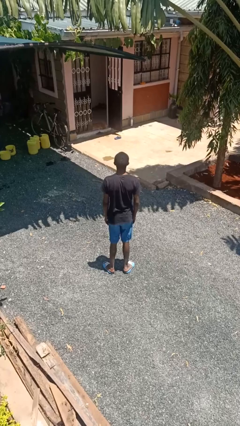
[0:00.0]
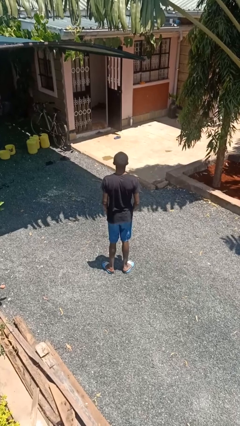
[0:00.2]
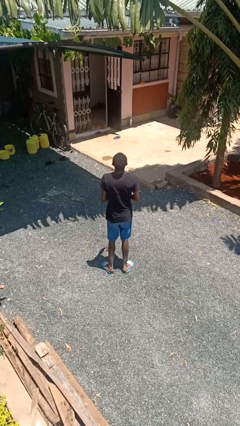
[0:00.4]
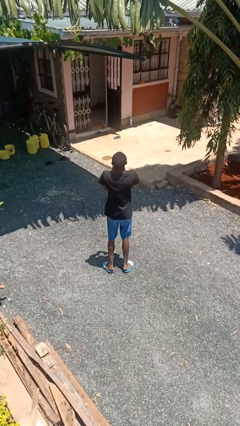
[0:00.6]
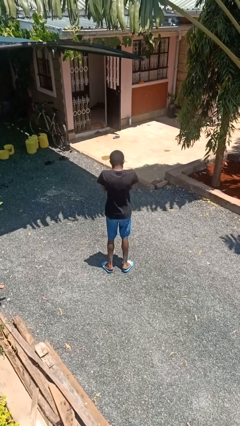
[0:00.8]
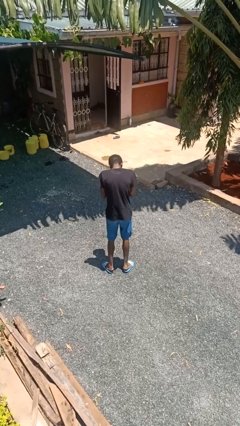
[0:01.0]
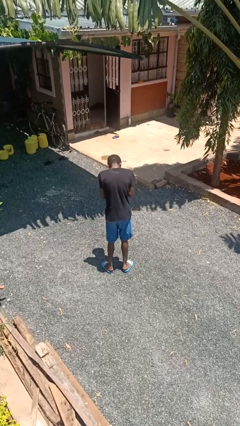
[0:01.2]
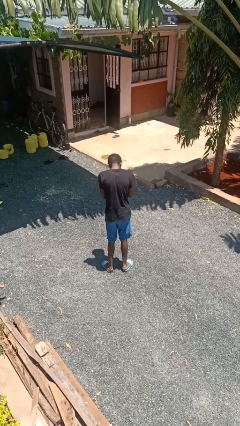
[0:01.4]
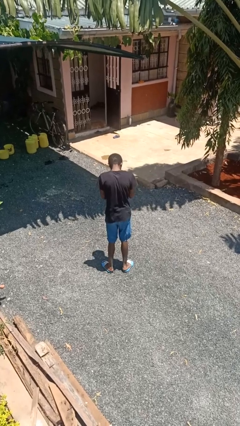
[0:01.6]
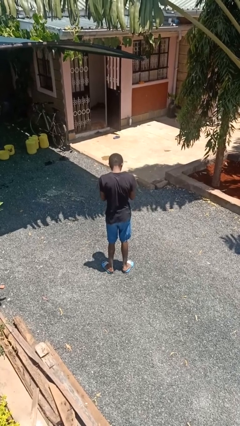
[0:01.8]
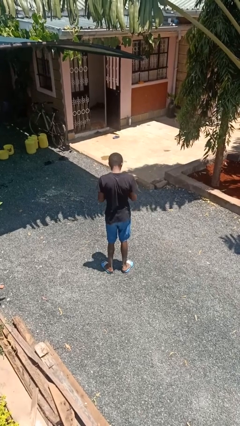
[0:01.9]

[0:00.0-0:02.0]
person sneezes into hand

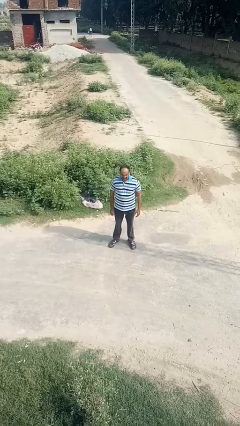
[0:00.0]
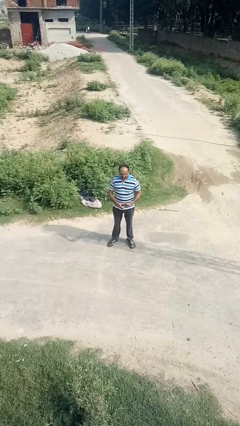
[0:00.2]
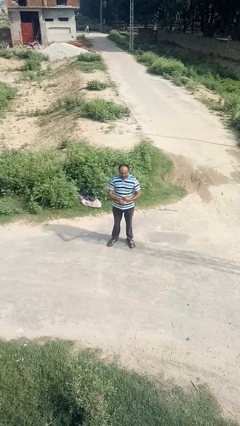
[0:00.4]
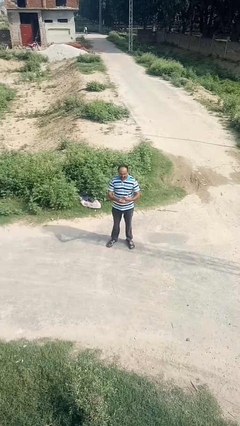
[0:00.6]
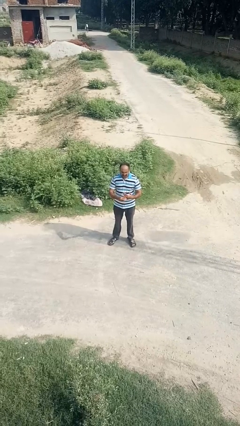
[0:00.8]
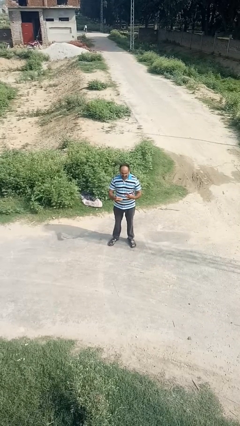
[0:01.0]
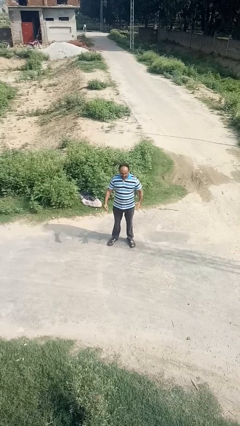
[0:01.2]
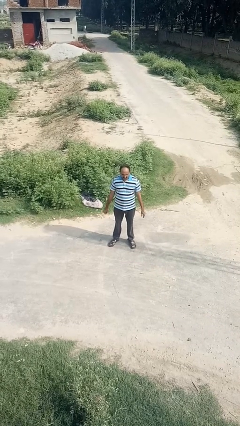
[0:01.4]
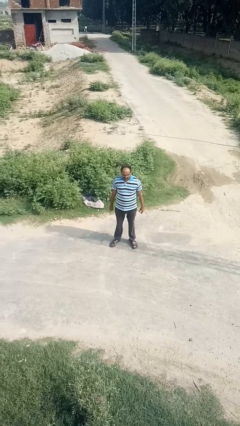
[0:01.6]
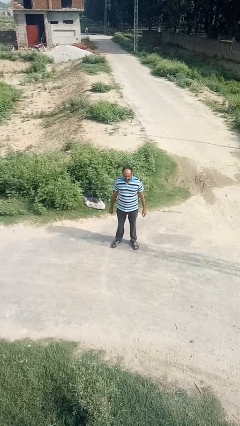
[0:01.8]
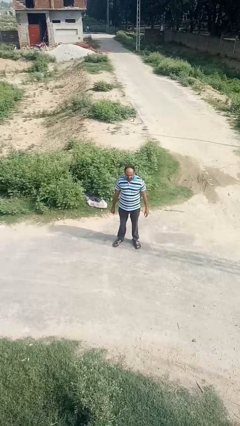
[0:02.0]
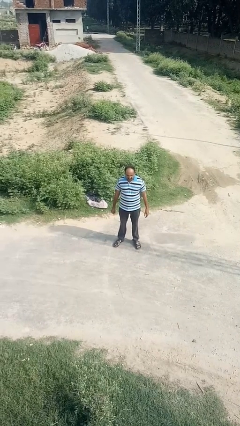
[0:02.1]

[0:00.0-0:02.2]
person takes off ring

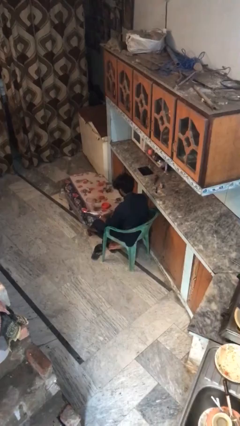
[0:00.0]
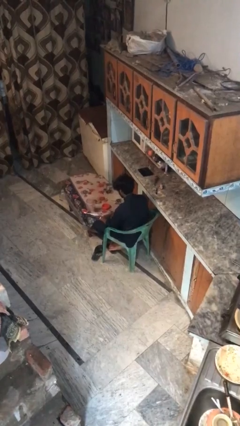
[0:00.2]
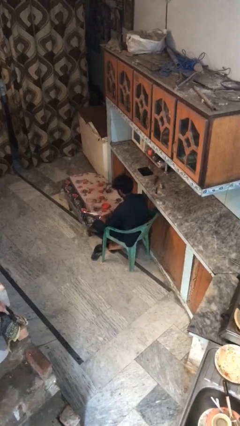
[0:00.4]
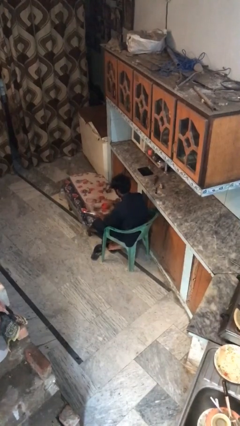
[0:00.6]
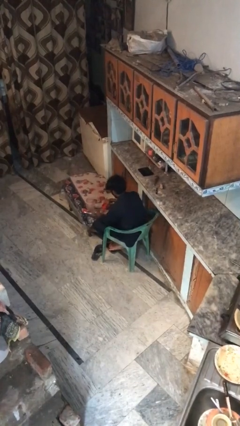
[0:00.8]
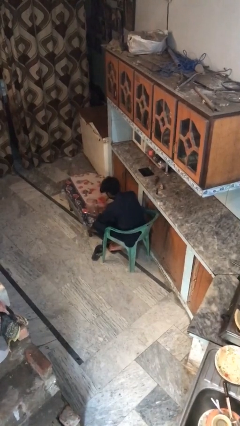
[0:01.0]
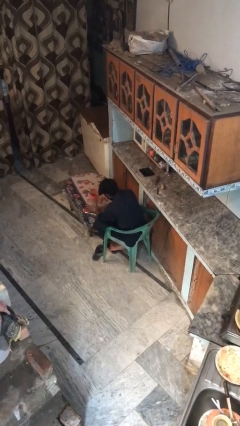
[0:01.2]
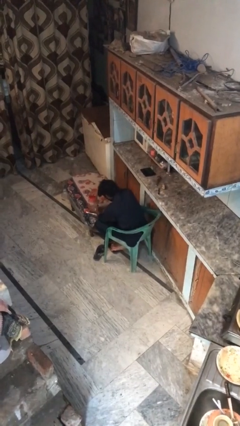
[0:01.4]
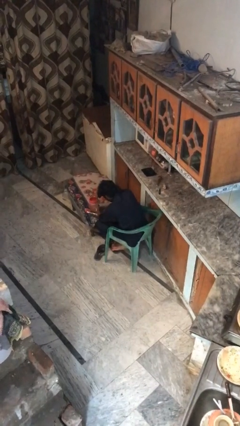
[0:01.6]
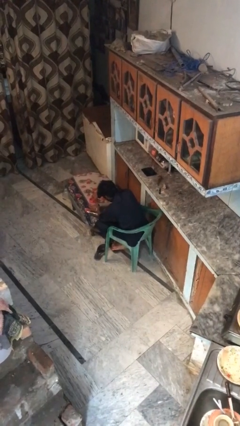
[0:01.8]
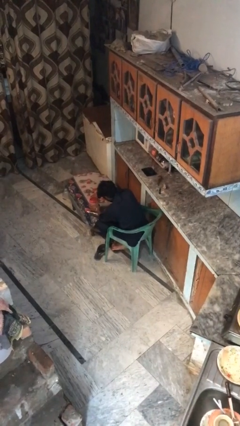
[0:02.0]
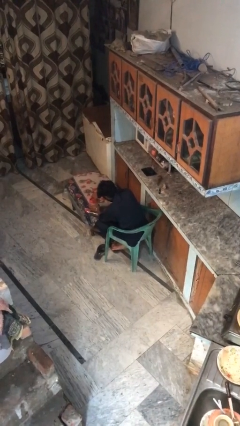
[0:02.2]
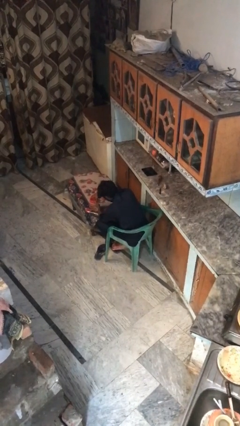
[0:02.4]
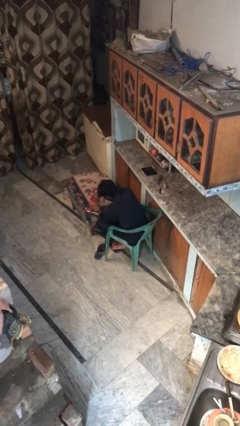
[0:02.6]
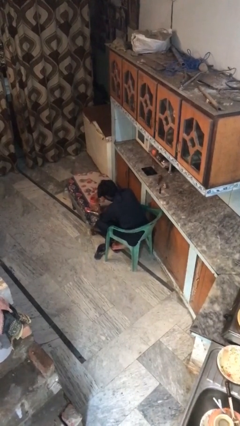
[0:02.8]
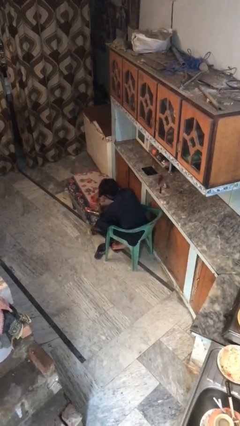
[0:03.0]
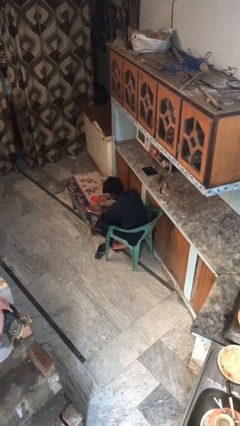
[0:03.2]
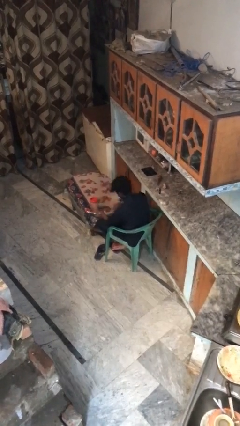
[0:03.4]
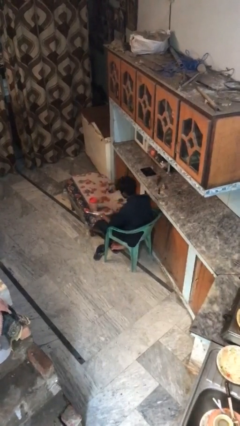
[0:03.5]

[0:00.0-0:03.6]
person closes jar

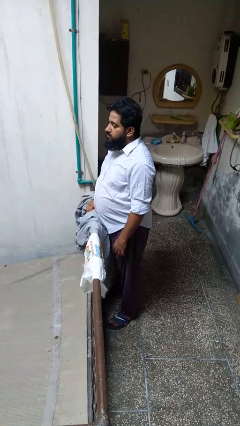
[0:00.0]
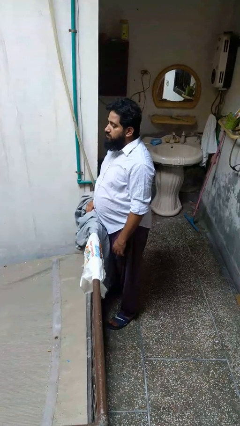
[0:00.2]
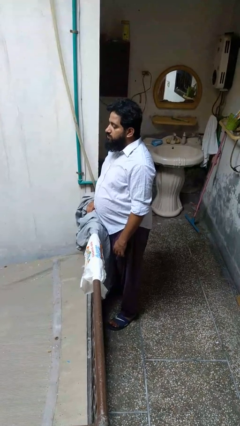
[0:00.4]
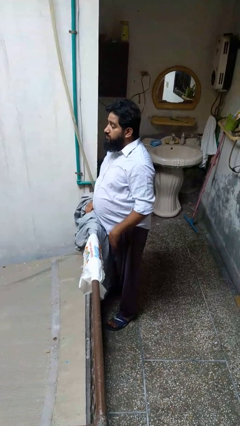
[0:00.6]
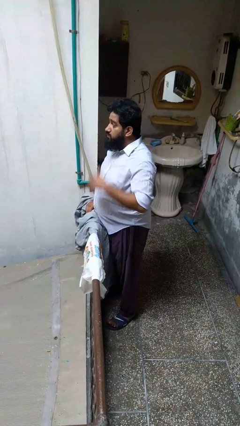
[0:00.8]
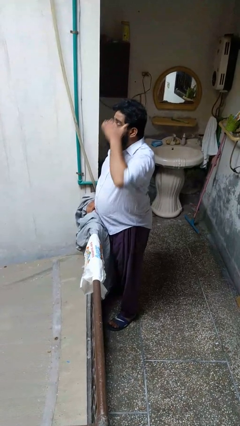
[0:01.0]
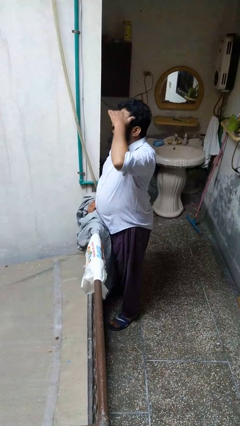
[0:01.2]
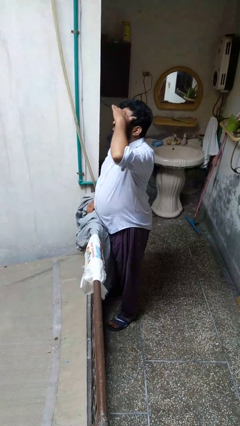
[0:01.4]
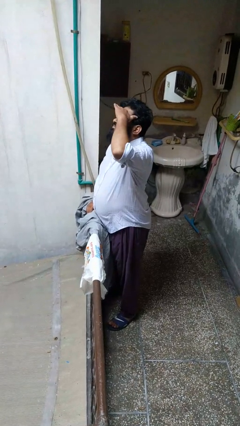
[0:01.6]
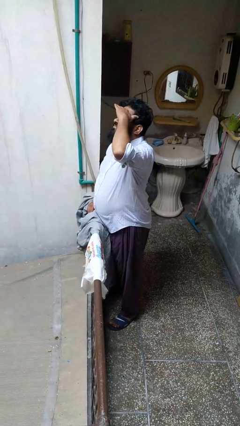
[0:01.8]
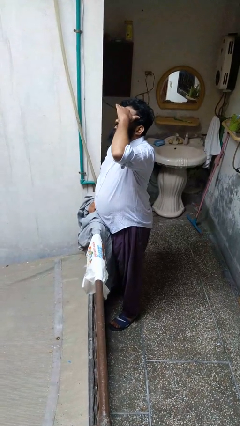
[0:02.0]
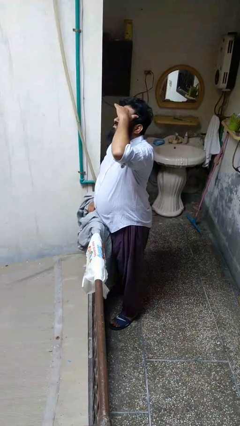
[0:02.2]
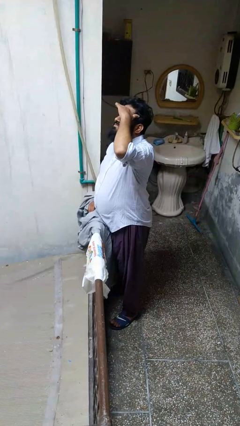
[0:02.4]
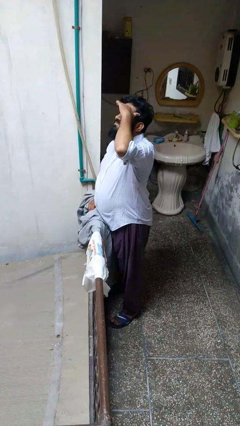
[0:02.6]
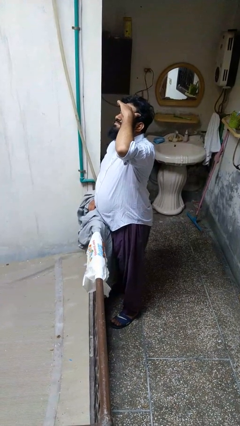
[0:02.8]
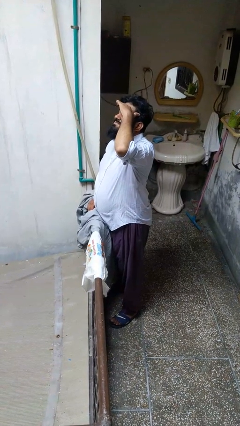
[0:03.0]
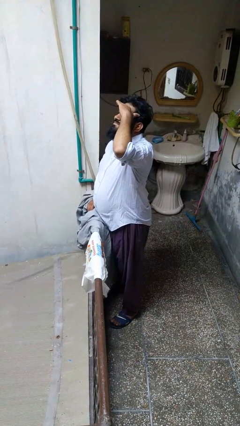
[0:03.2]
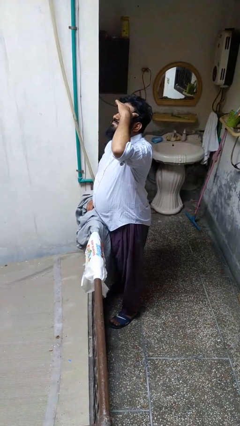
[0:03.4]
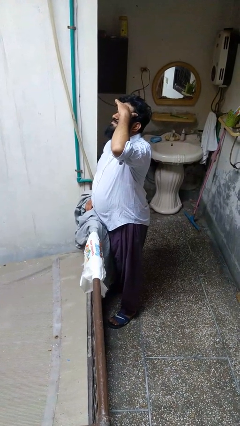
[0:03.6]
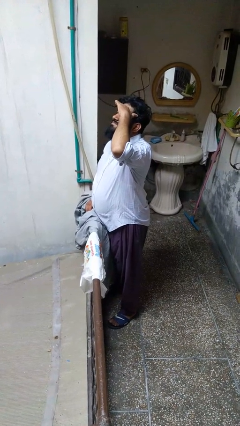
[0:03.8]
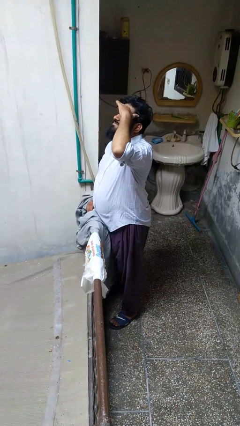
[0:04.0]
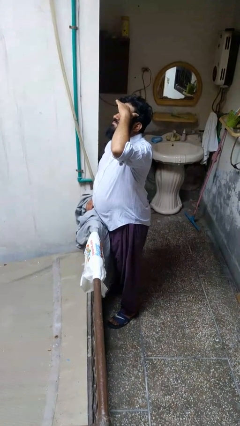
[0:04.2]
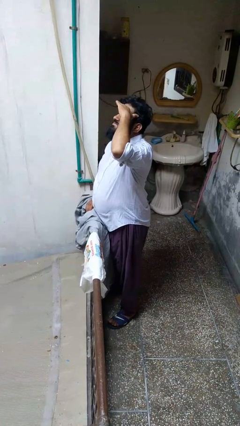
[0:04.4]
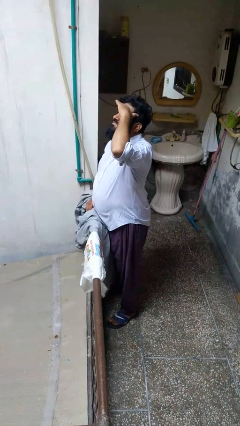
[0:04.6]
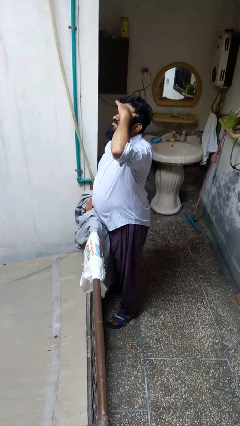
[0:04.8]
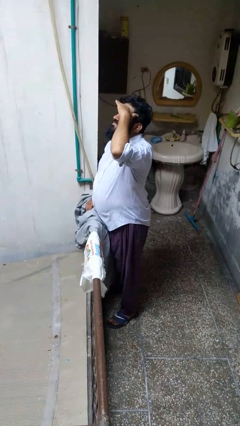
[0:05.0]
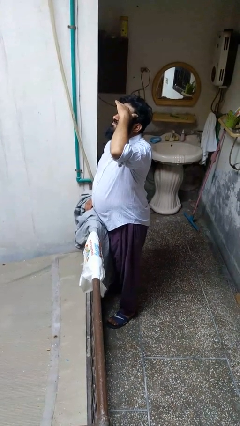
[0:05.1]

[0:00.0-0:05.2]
person shades eyes

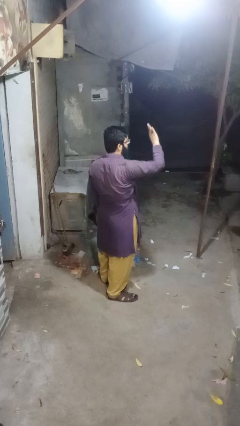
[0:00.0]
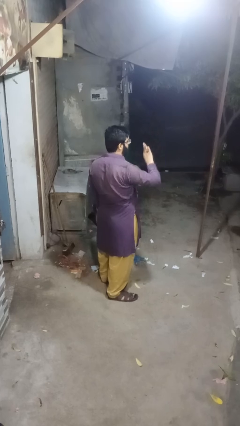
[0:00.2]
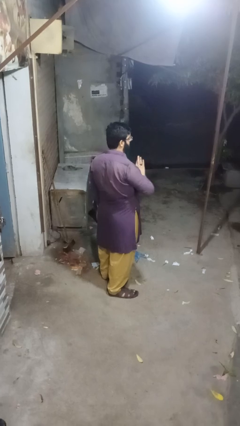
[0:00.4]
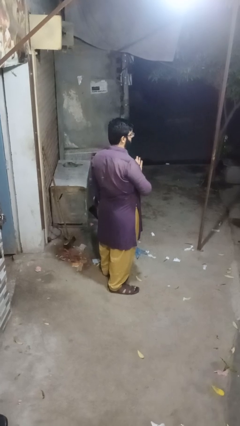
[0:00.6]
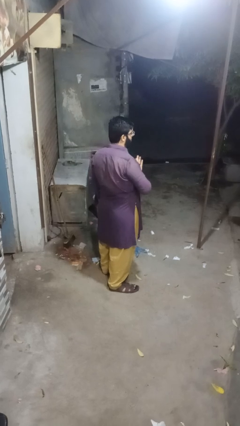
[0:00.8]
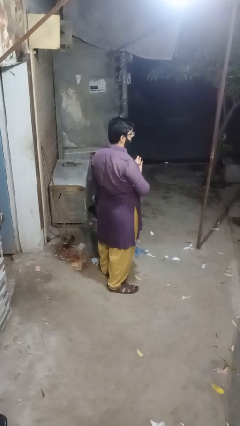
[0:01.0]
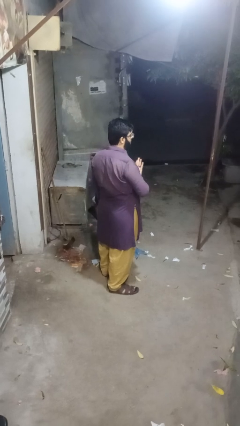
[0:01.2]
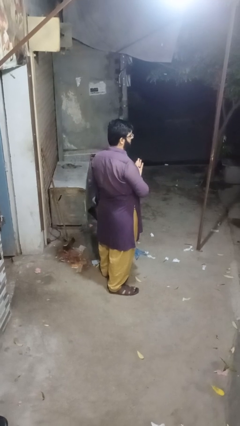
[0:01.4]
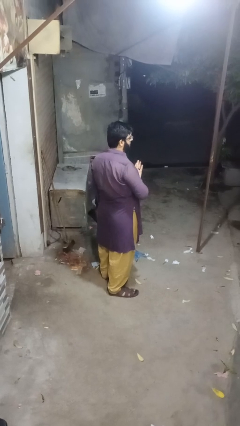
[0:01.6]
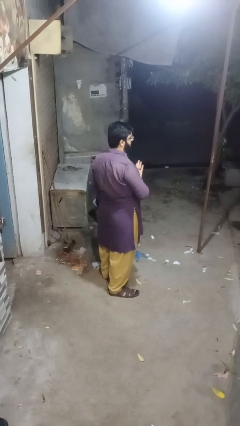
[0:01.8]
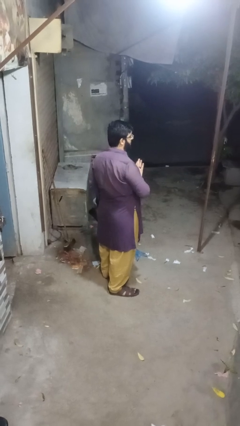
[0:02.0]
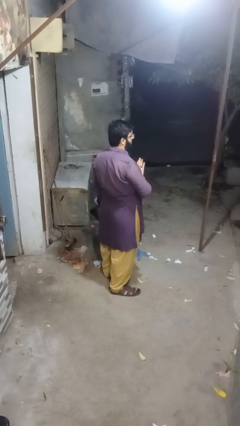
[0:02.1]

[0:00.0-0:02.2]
person gestures swipe down

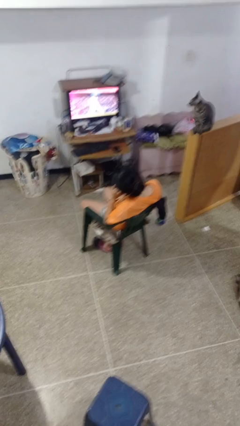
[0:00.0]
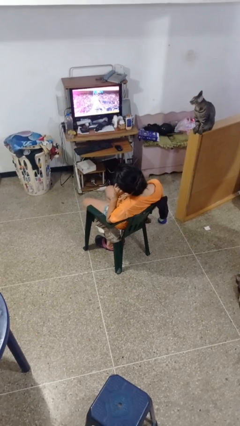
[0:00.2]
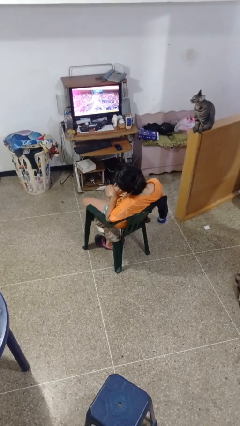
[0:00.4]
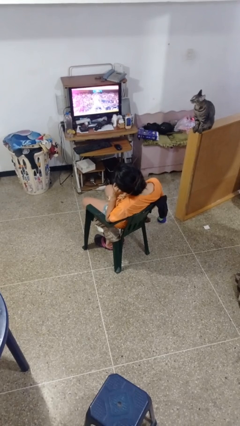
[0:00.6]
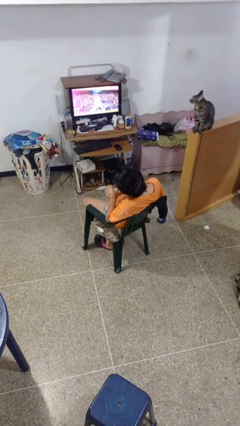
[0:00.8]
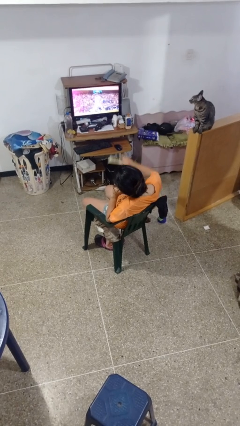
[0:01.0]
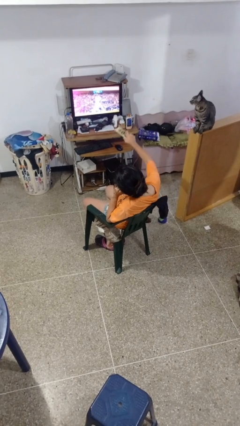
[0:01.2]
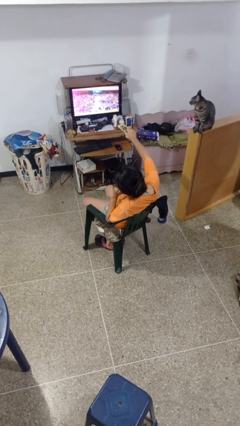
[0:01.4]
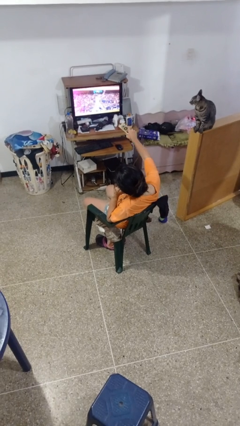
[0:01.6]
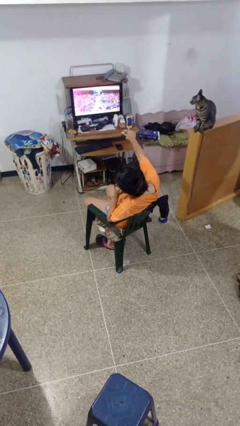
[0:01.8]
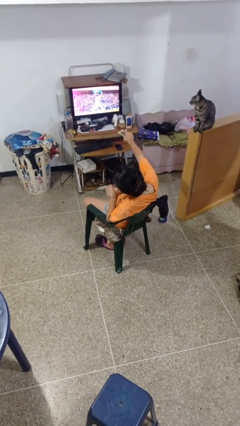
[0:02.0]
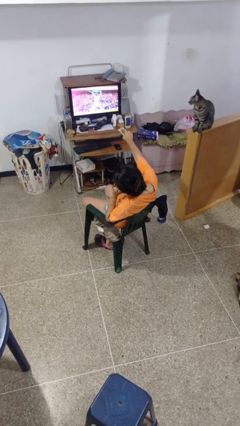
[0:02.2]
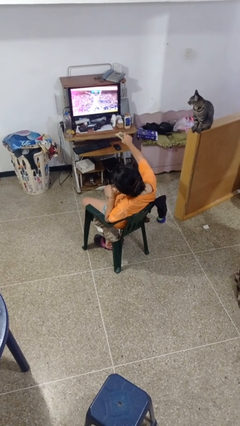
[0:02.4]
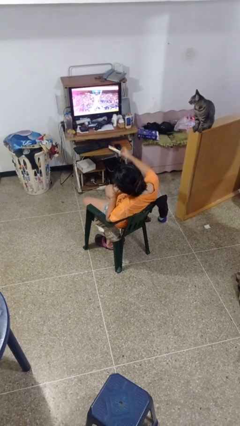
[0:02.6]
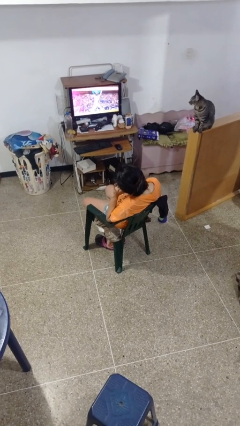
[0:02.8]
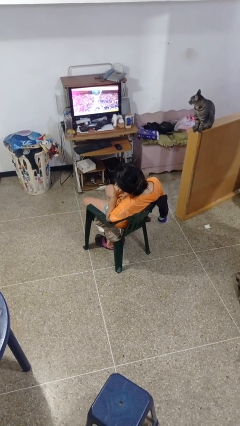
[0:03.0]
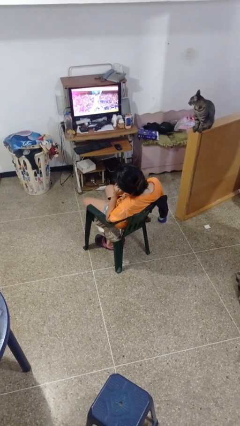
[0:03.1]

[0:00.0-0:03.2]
person uses television remote
